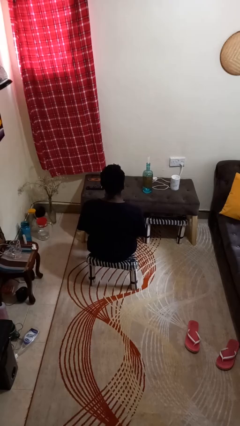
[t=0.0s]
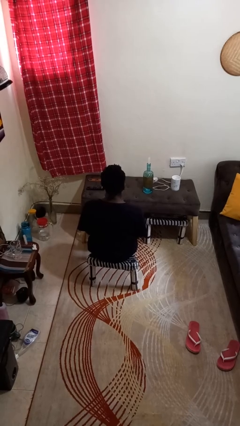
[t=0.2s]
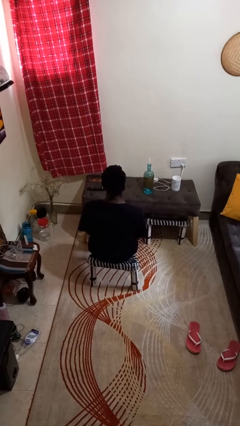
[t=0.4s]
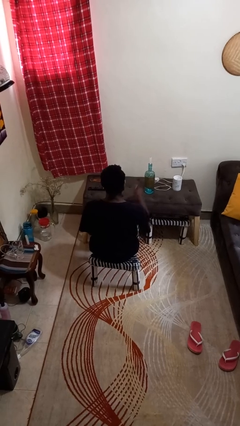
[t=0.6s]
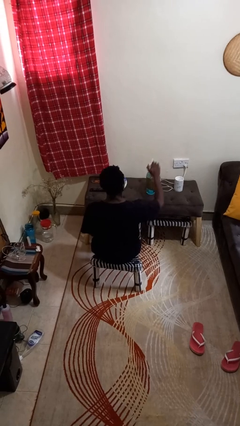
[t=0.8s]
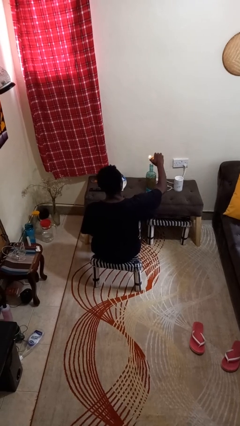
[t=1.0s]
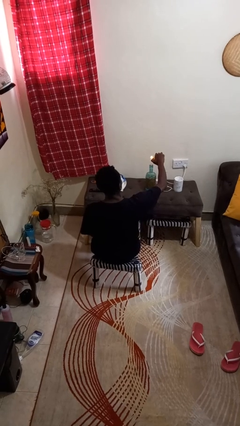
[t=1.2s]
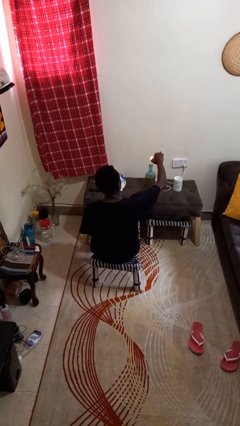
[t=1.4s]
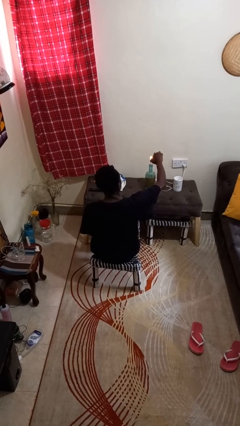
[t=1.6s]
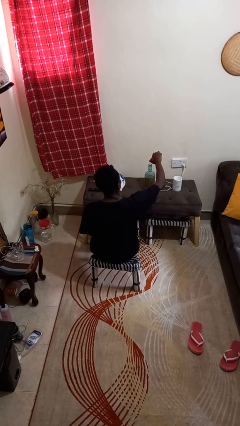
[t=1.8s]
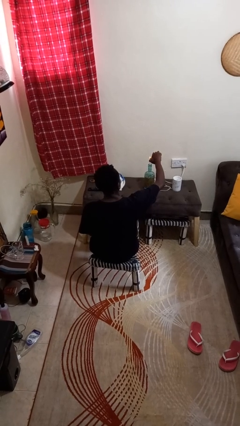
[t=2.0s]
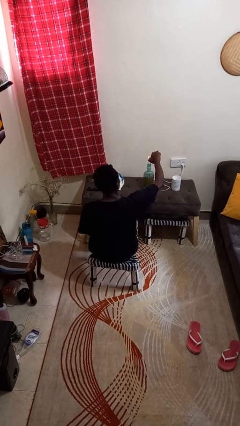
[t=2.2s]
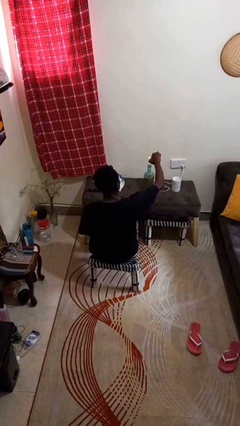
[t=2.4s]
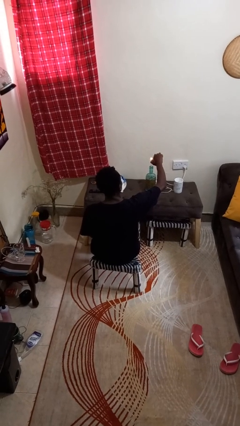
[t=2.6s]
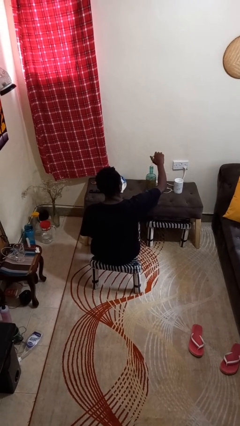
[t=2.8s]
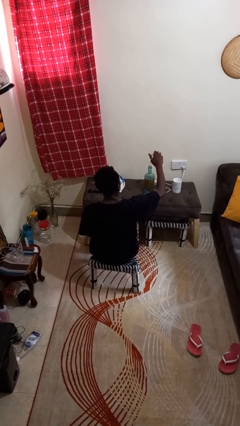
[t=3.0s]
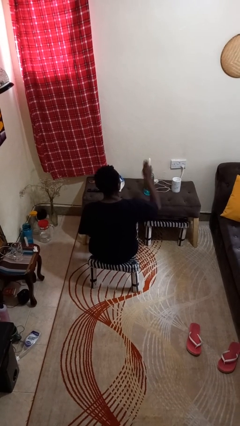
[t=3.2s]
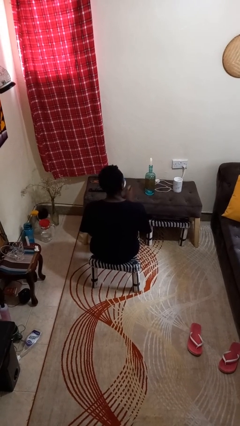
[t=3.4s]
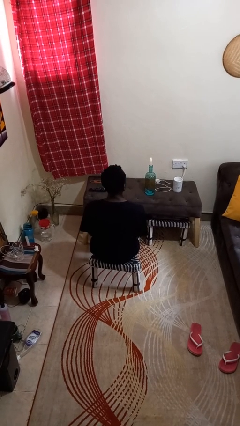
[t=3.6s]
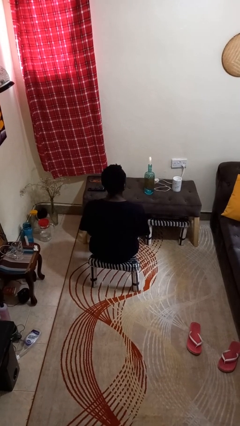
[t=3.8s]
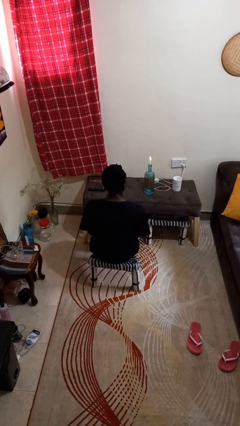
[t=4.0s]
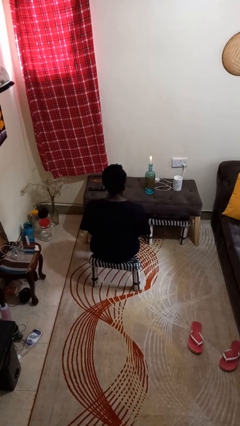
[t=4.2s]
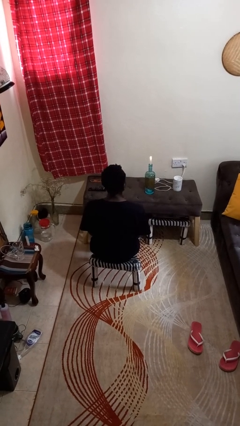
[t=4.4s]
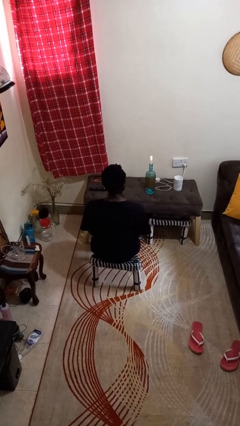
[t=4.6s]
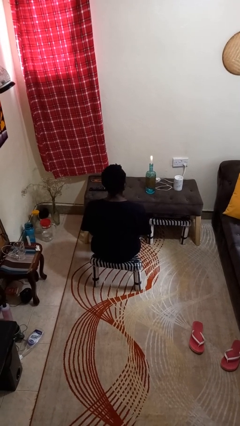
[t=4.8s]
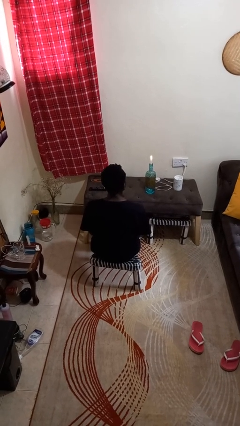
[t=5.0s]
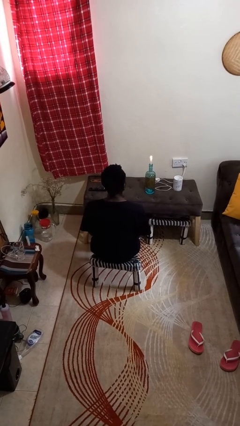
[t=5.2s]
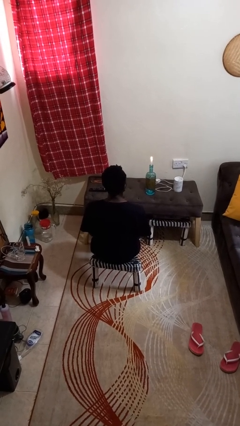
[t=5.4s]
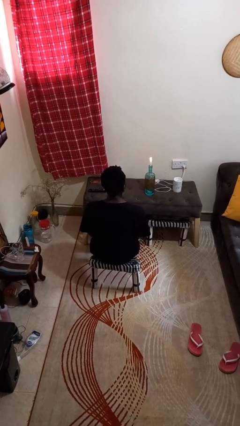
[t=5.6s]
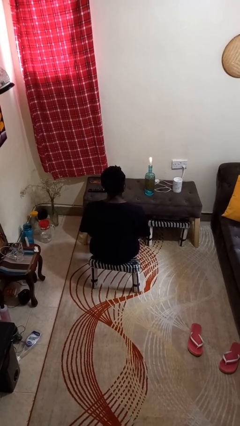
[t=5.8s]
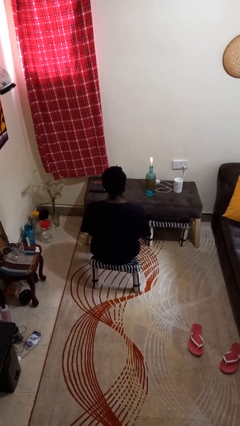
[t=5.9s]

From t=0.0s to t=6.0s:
person lights candle

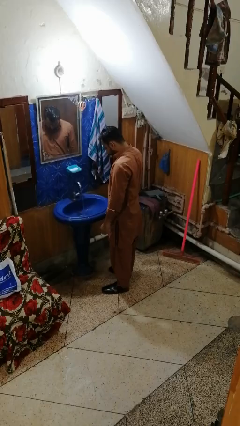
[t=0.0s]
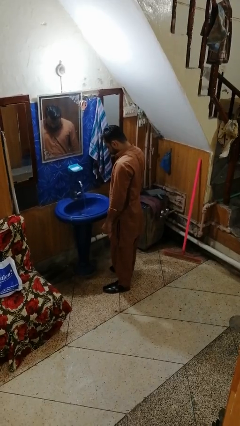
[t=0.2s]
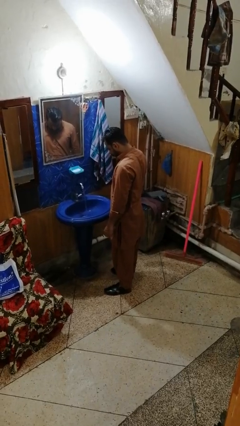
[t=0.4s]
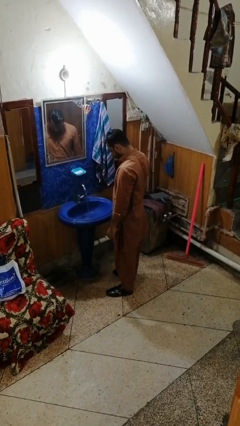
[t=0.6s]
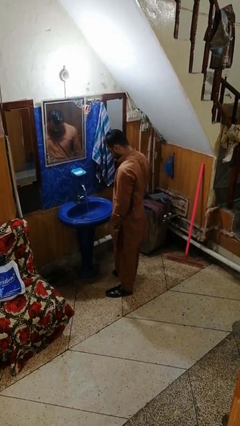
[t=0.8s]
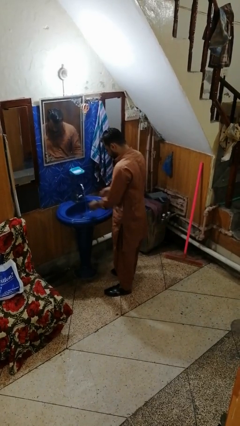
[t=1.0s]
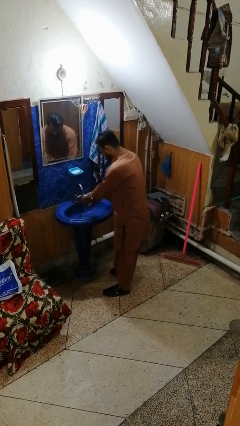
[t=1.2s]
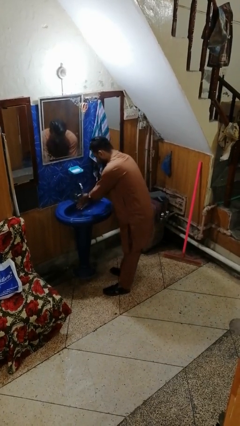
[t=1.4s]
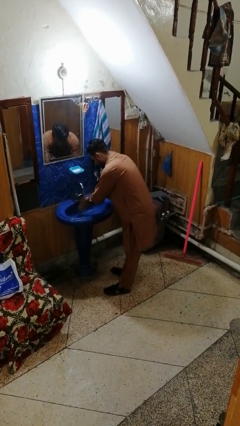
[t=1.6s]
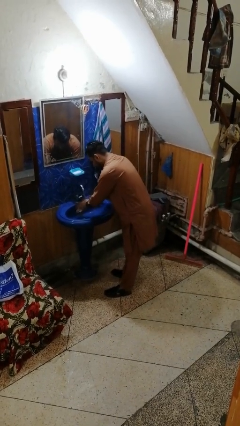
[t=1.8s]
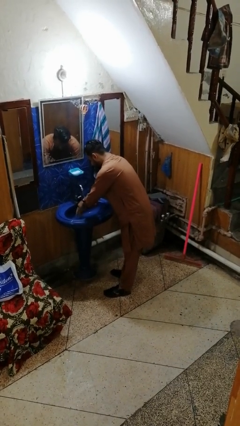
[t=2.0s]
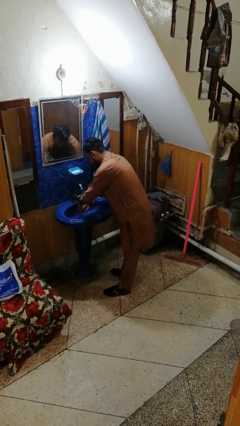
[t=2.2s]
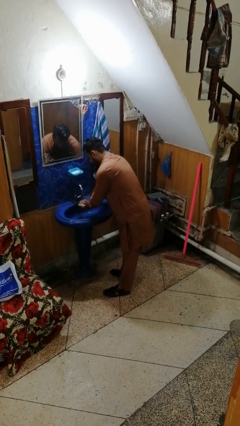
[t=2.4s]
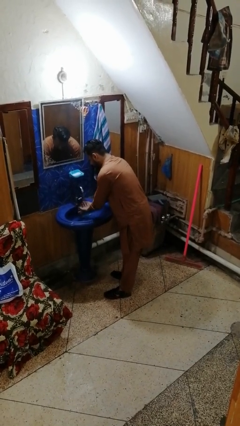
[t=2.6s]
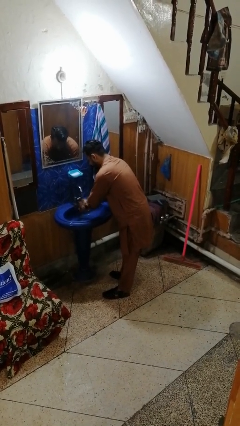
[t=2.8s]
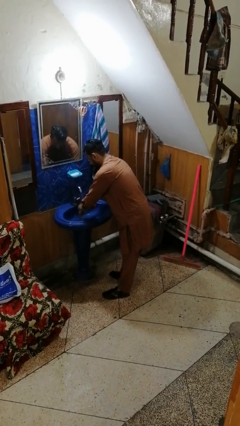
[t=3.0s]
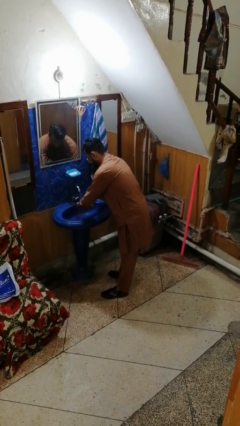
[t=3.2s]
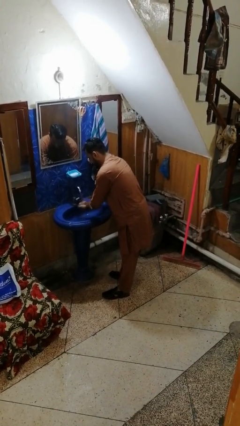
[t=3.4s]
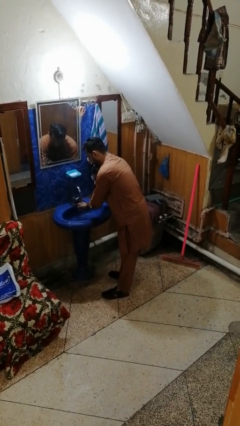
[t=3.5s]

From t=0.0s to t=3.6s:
person washes hands

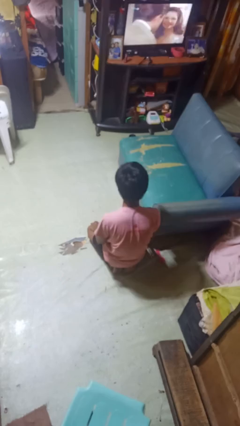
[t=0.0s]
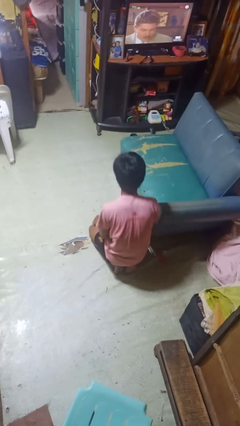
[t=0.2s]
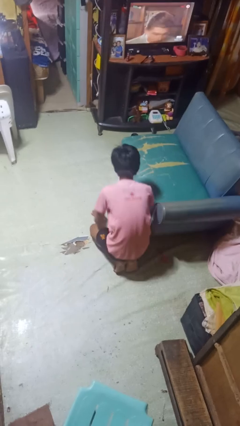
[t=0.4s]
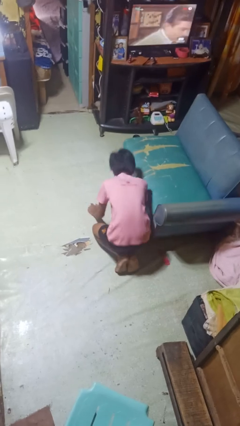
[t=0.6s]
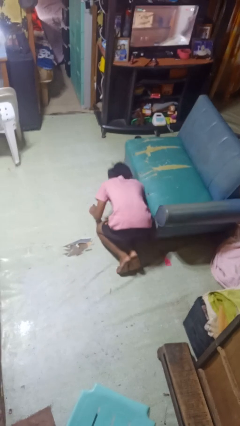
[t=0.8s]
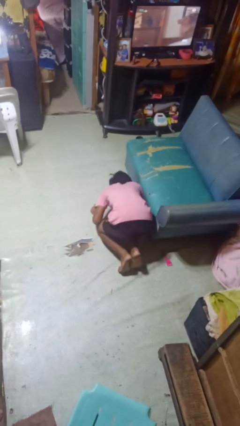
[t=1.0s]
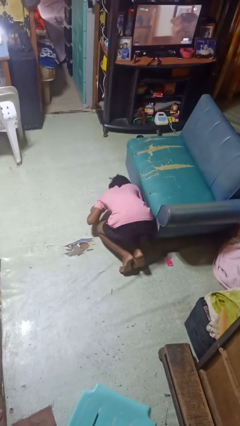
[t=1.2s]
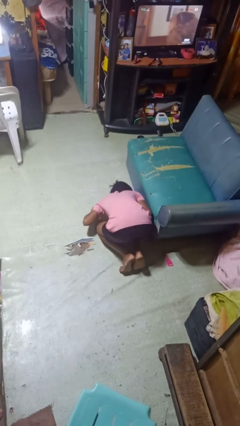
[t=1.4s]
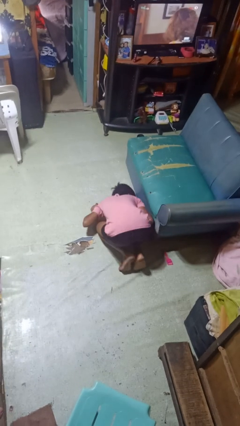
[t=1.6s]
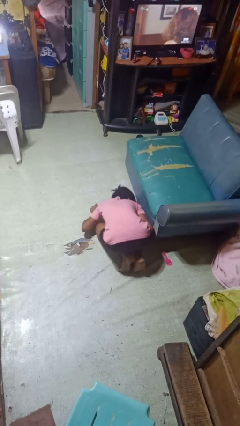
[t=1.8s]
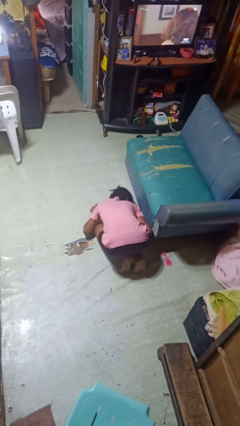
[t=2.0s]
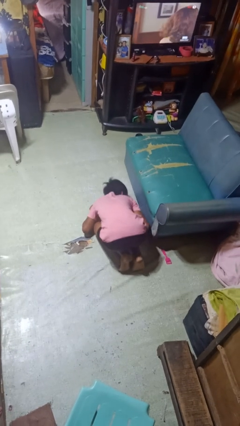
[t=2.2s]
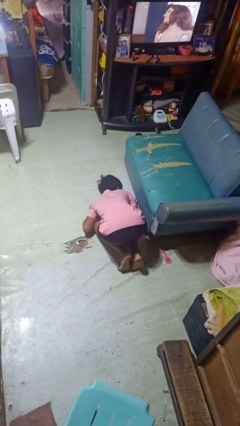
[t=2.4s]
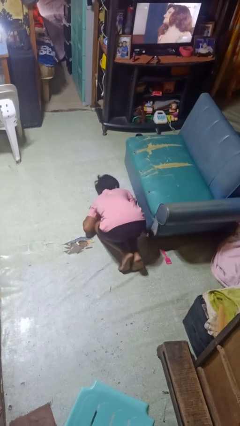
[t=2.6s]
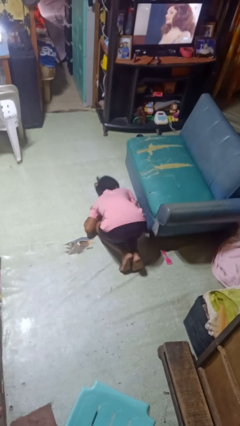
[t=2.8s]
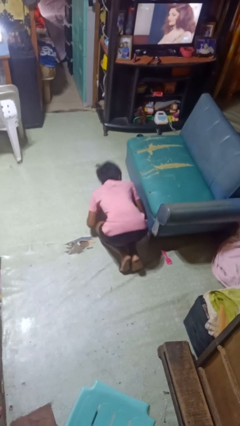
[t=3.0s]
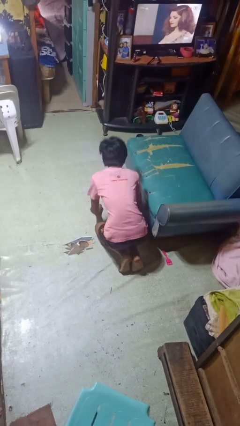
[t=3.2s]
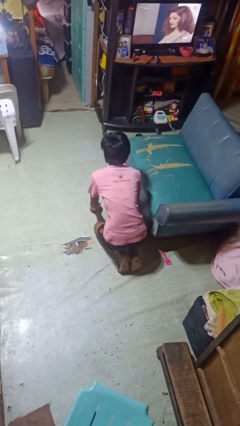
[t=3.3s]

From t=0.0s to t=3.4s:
person searches under couch

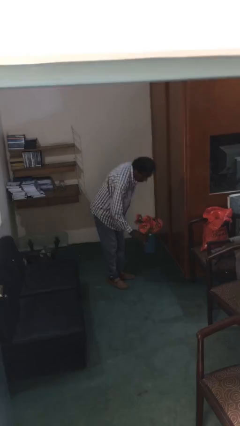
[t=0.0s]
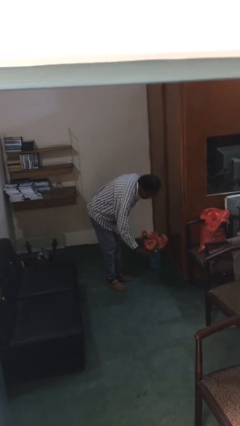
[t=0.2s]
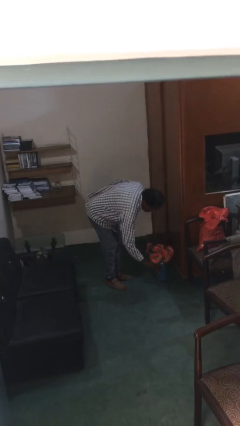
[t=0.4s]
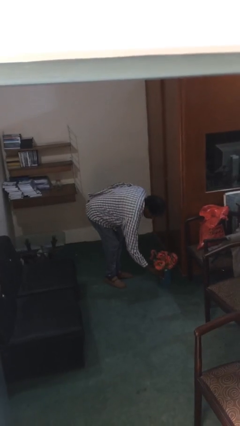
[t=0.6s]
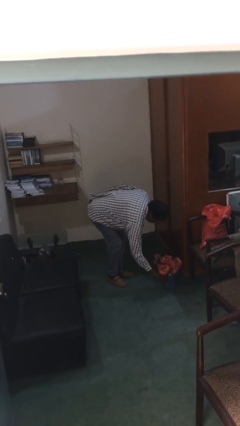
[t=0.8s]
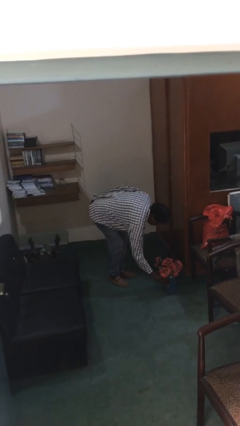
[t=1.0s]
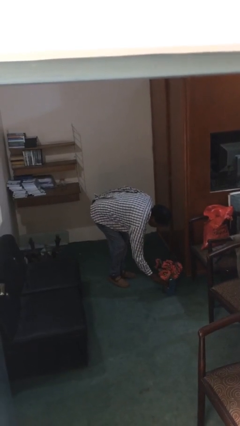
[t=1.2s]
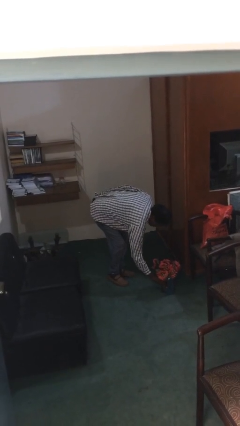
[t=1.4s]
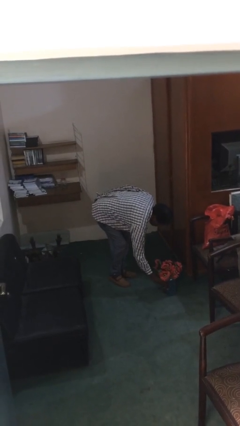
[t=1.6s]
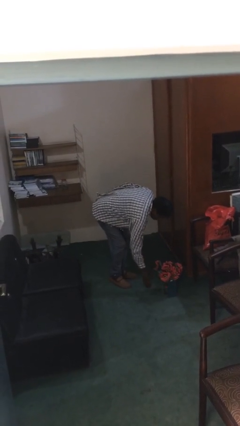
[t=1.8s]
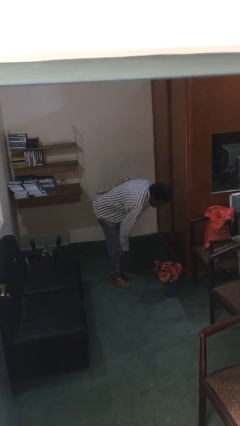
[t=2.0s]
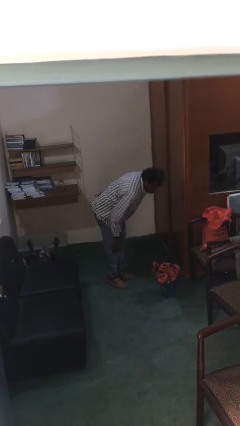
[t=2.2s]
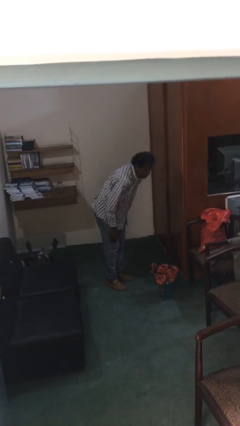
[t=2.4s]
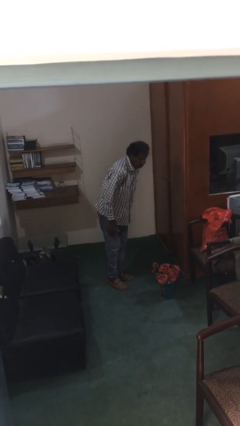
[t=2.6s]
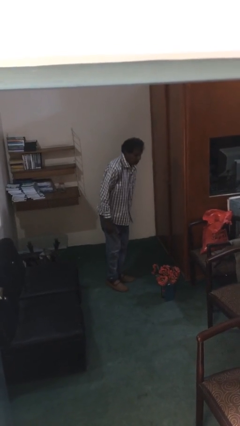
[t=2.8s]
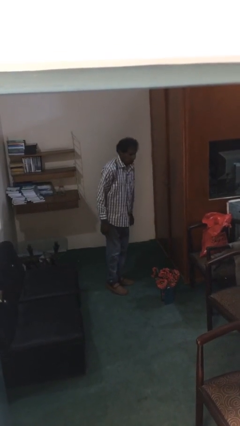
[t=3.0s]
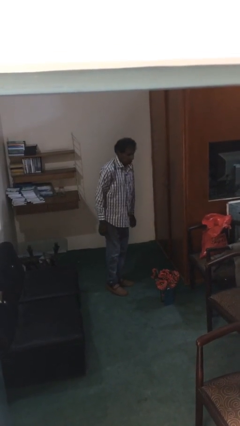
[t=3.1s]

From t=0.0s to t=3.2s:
person puts down object on floor

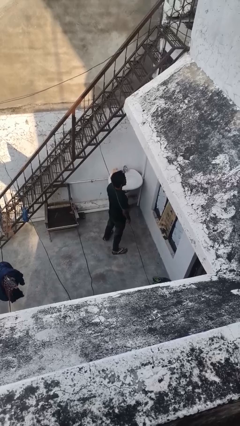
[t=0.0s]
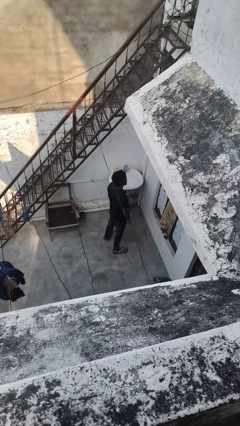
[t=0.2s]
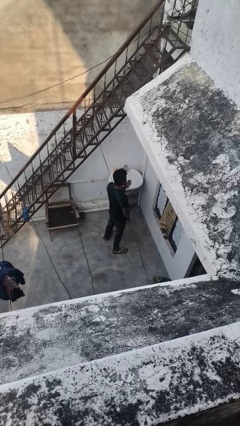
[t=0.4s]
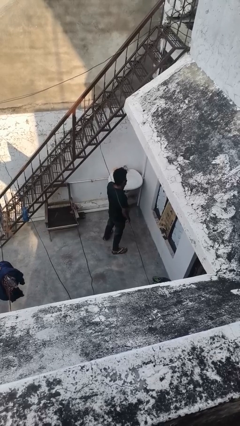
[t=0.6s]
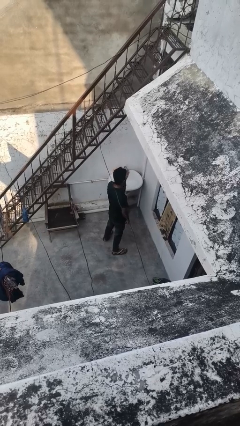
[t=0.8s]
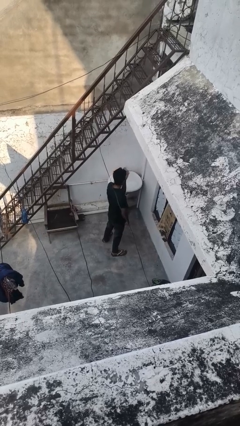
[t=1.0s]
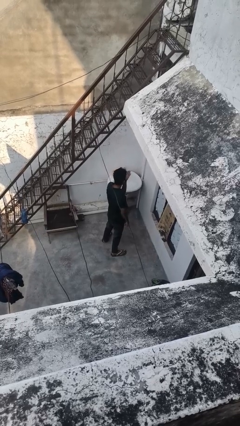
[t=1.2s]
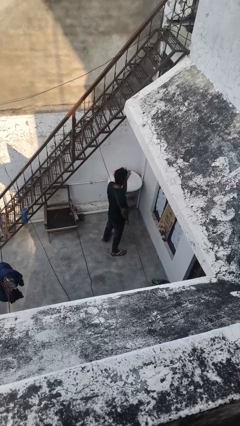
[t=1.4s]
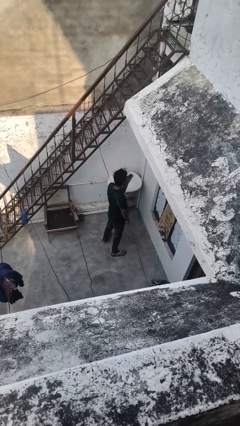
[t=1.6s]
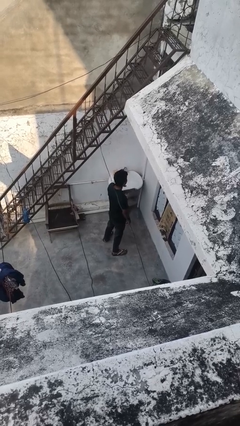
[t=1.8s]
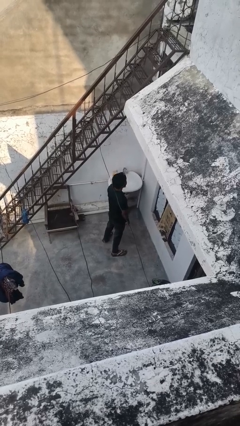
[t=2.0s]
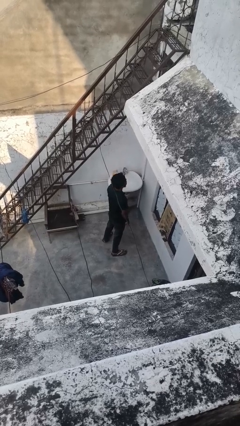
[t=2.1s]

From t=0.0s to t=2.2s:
person gestures blow kiss
